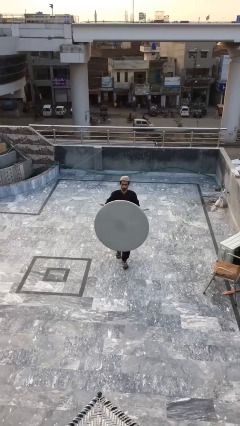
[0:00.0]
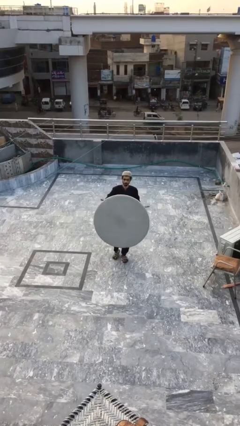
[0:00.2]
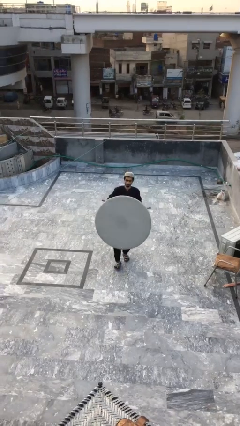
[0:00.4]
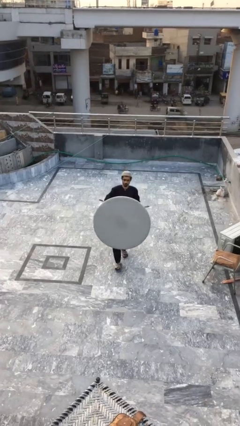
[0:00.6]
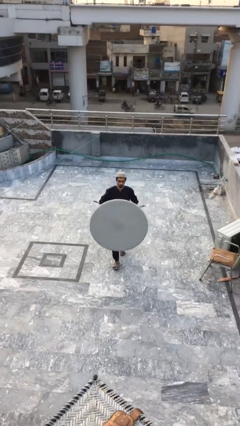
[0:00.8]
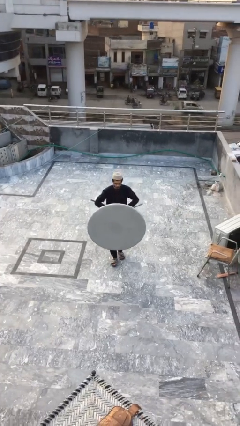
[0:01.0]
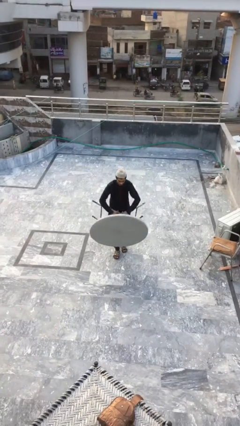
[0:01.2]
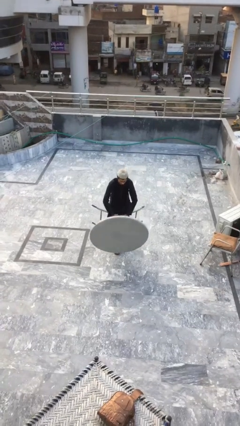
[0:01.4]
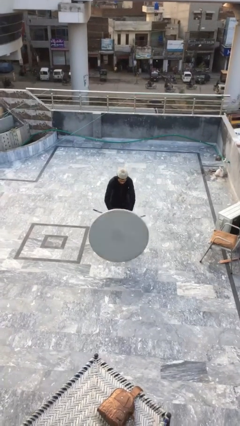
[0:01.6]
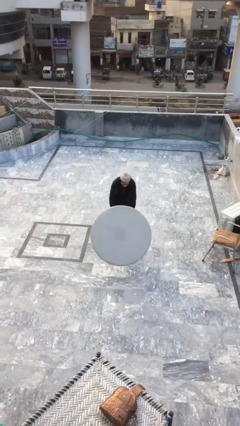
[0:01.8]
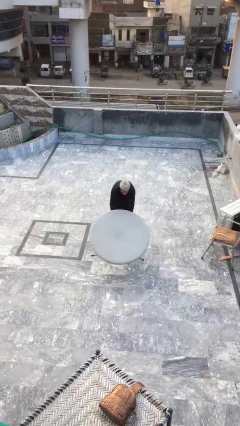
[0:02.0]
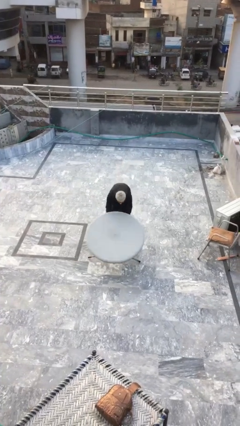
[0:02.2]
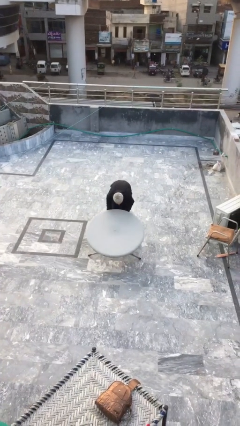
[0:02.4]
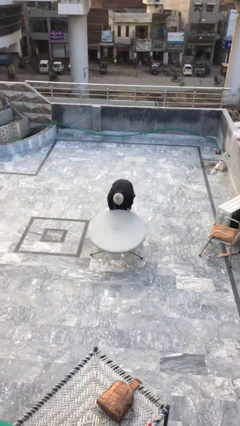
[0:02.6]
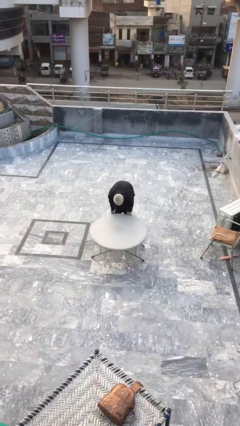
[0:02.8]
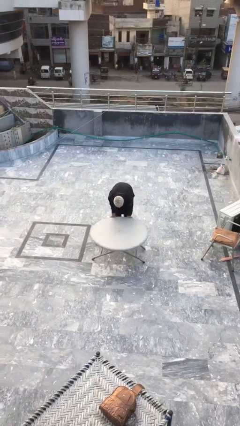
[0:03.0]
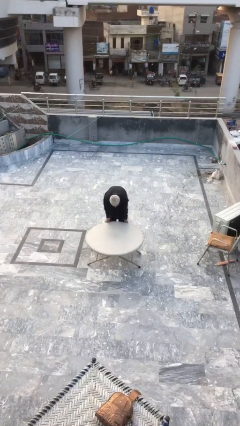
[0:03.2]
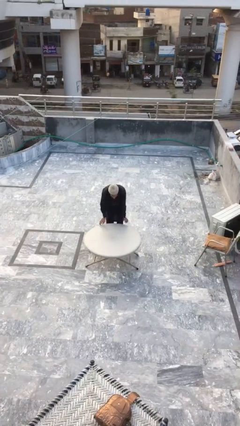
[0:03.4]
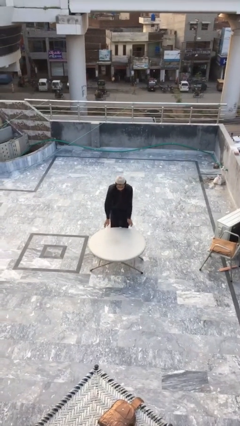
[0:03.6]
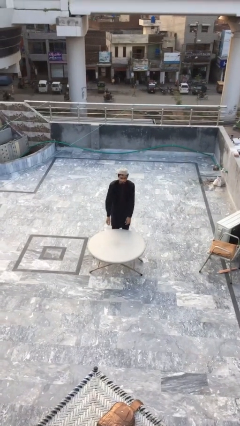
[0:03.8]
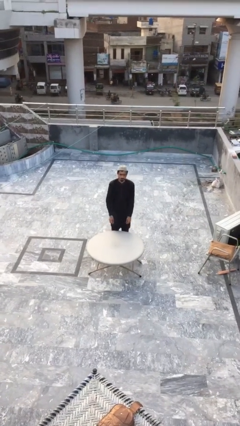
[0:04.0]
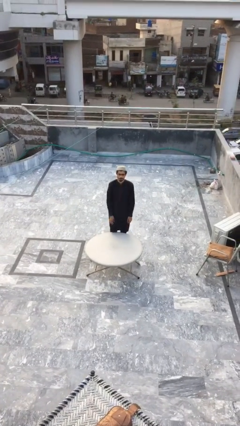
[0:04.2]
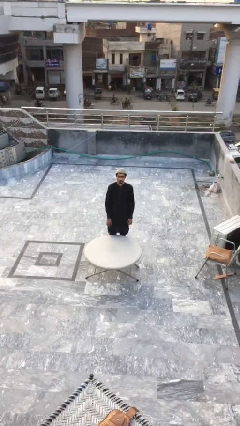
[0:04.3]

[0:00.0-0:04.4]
person puts down object on floor

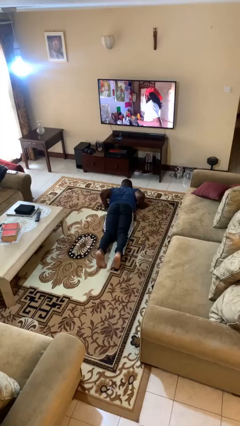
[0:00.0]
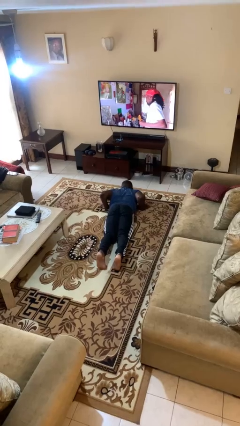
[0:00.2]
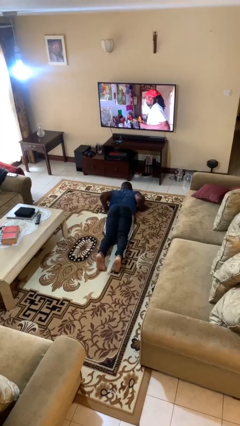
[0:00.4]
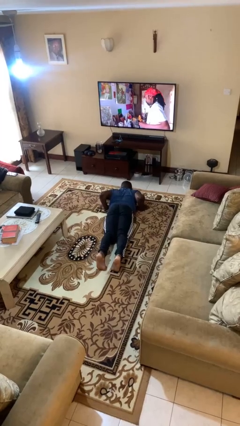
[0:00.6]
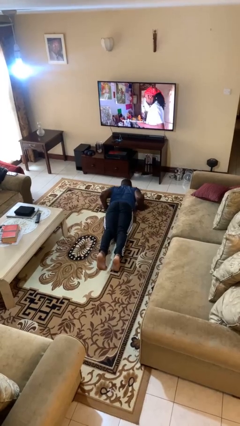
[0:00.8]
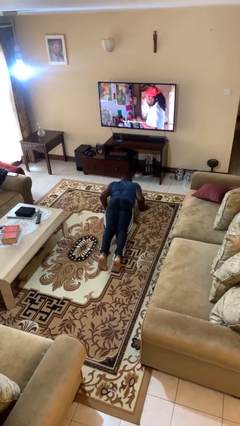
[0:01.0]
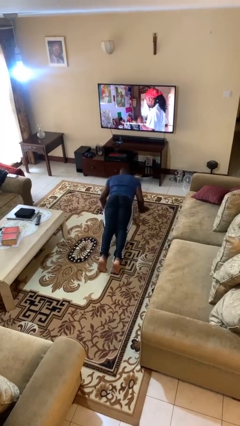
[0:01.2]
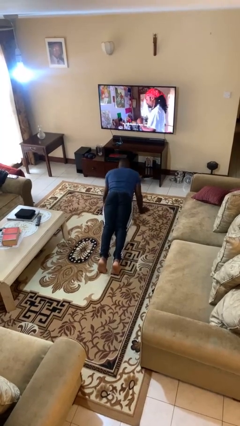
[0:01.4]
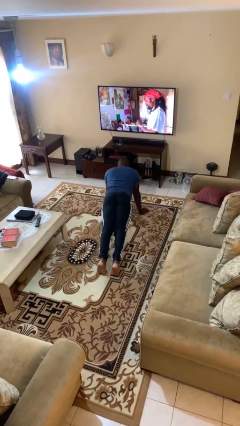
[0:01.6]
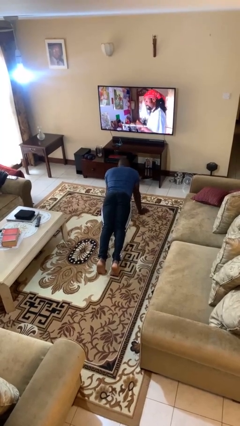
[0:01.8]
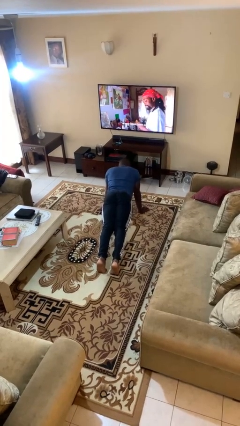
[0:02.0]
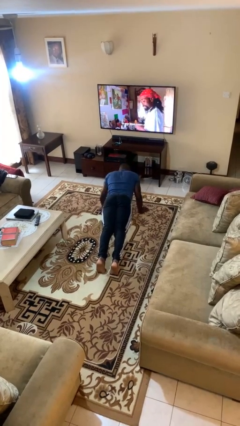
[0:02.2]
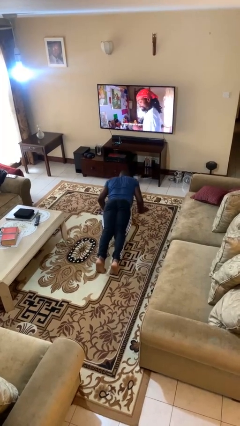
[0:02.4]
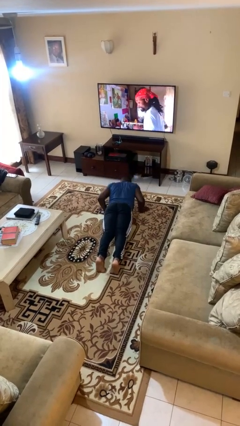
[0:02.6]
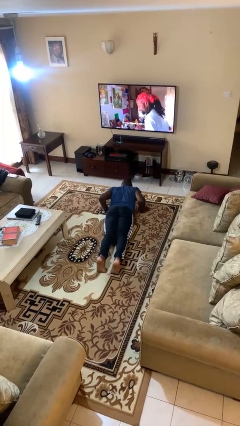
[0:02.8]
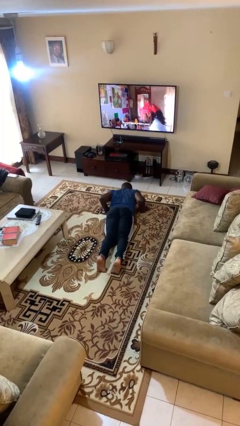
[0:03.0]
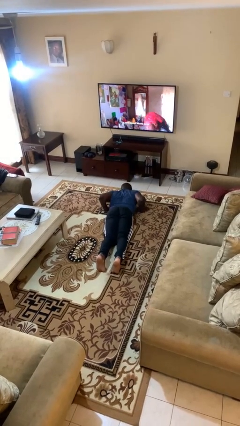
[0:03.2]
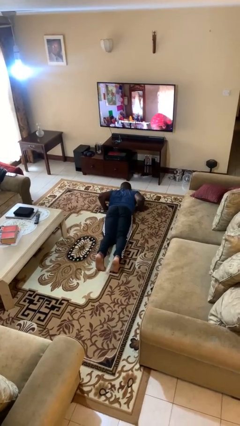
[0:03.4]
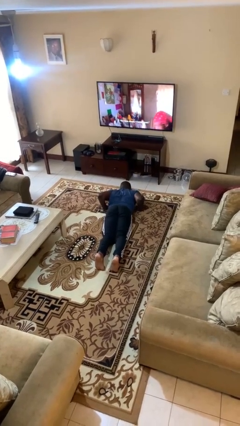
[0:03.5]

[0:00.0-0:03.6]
person exercises with pushup

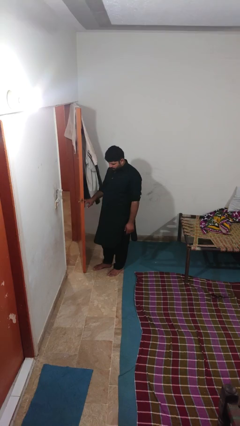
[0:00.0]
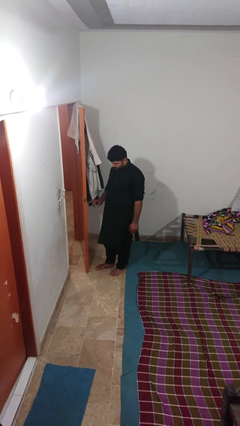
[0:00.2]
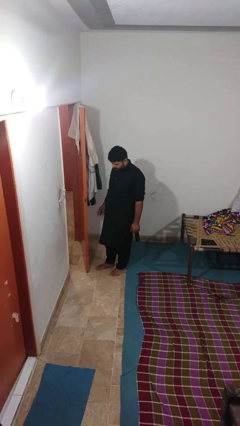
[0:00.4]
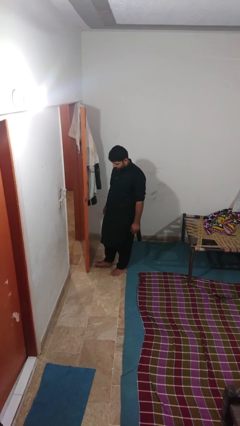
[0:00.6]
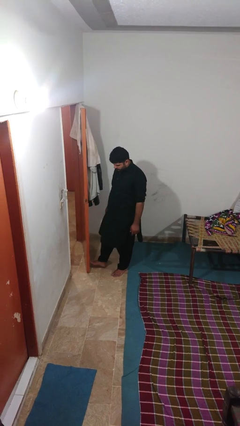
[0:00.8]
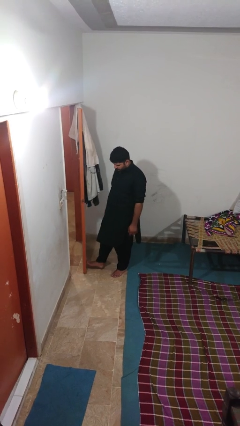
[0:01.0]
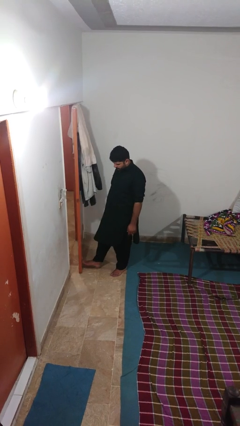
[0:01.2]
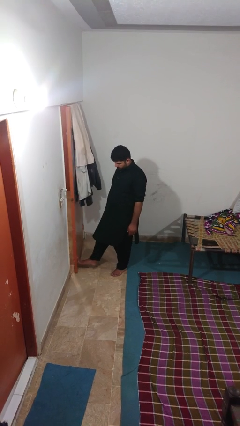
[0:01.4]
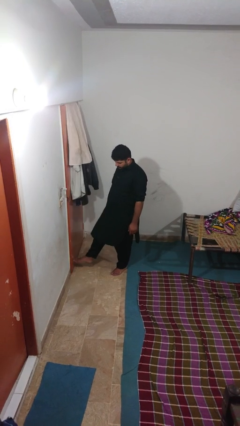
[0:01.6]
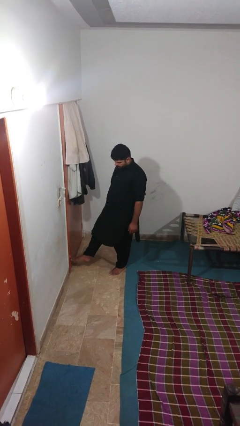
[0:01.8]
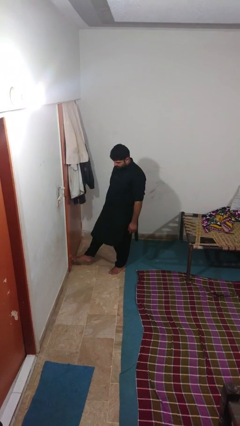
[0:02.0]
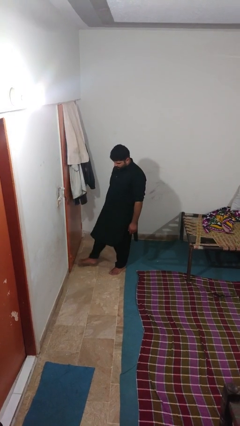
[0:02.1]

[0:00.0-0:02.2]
person closes door with foot

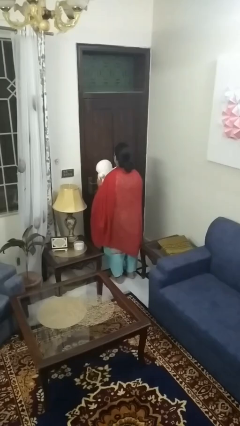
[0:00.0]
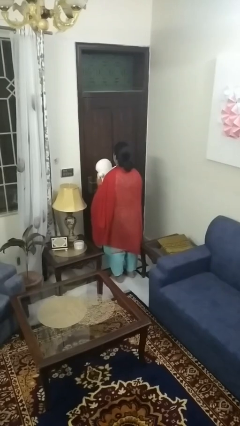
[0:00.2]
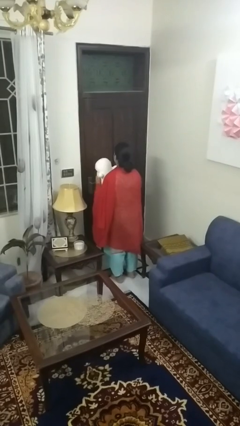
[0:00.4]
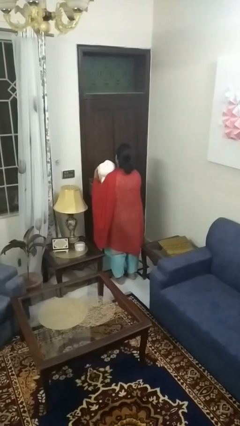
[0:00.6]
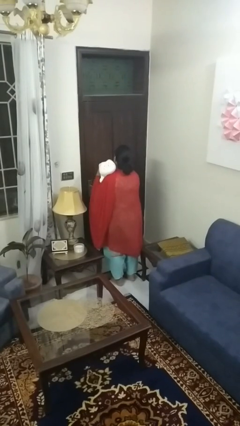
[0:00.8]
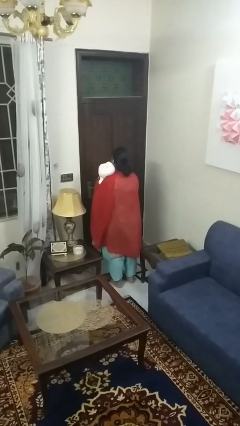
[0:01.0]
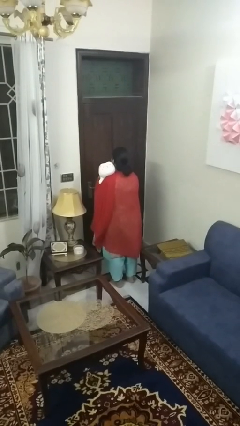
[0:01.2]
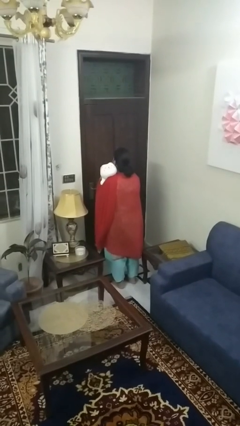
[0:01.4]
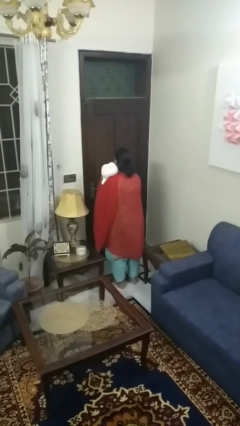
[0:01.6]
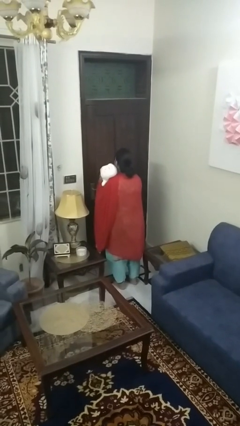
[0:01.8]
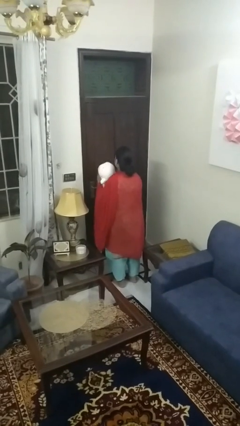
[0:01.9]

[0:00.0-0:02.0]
person hugs stuffed animal

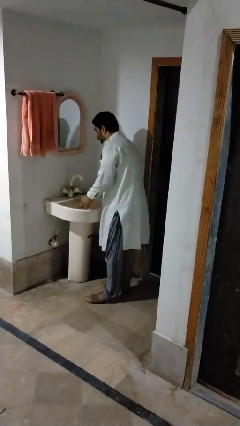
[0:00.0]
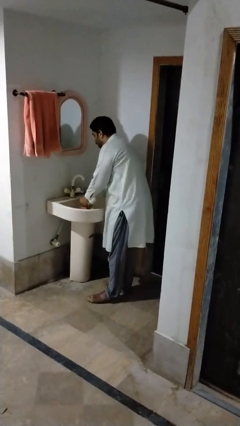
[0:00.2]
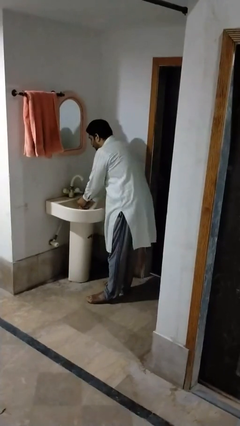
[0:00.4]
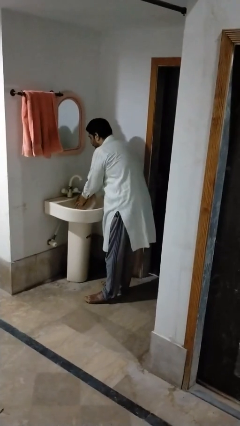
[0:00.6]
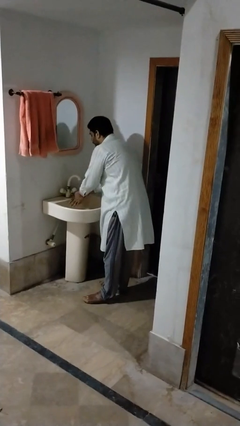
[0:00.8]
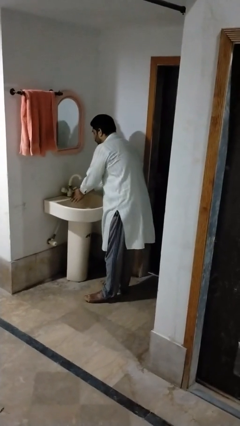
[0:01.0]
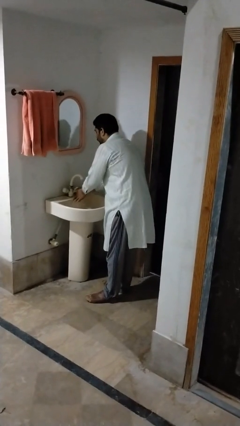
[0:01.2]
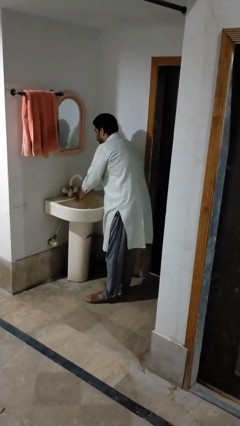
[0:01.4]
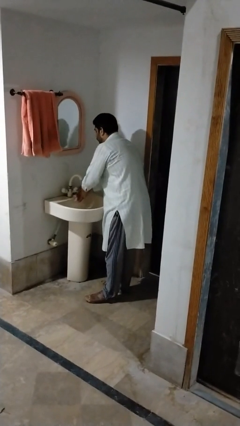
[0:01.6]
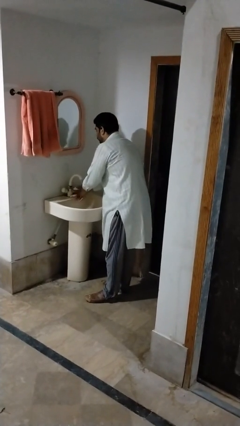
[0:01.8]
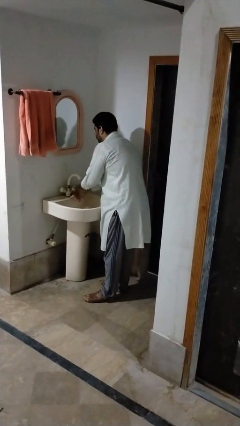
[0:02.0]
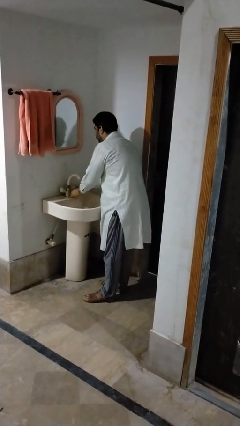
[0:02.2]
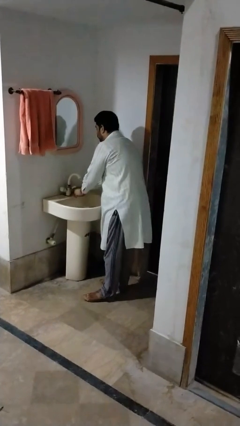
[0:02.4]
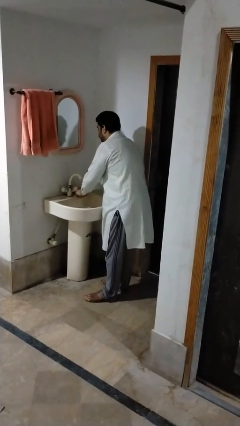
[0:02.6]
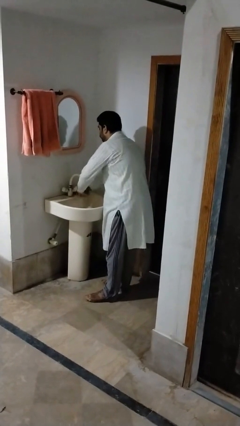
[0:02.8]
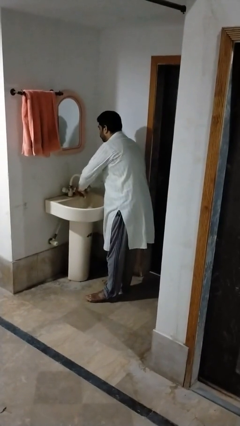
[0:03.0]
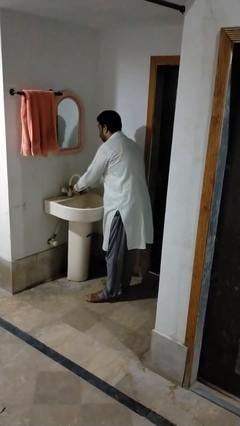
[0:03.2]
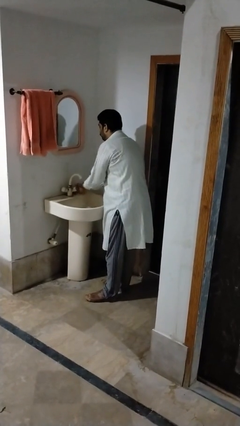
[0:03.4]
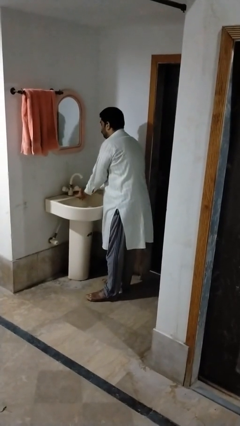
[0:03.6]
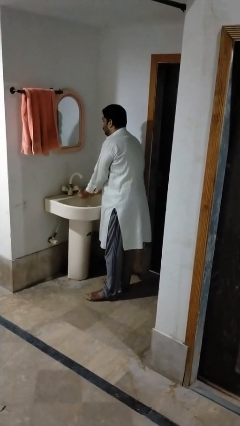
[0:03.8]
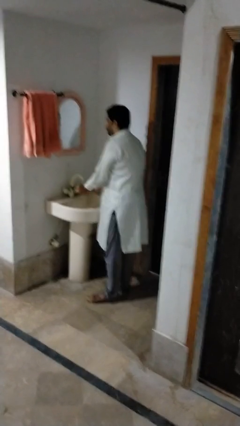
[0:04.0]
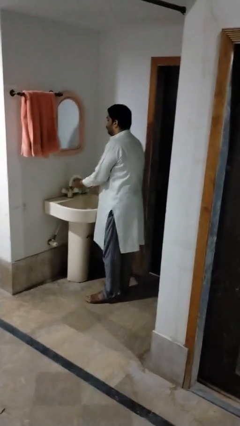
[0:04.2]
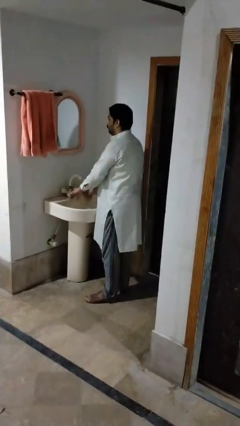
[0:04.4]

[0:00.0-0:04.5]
person washes hands

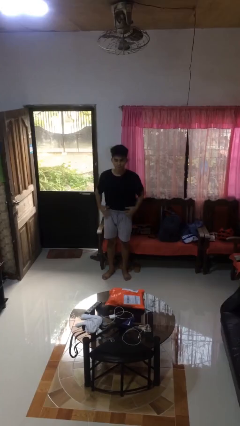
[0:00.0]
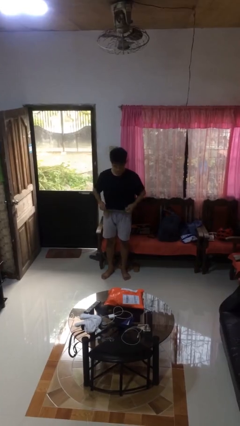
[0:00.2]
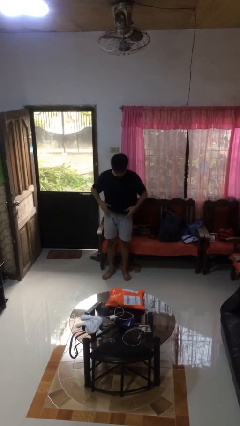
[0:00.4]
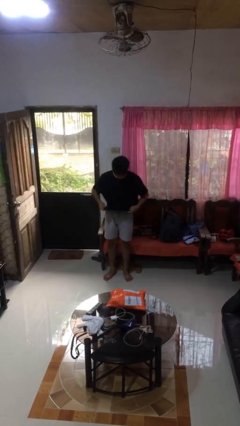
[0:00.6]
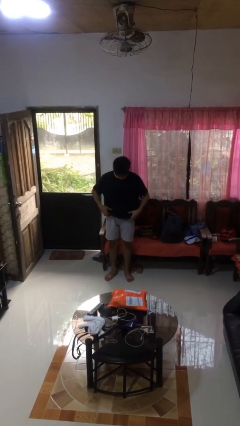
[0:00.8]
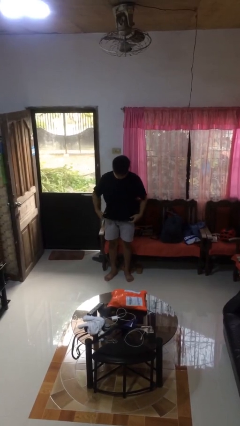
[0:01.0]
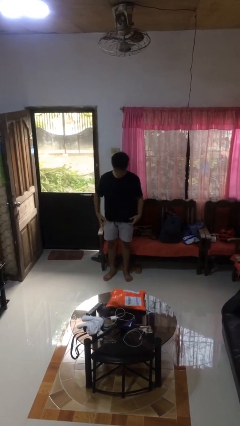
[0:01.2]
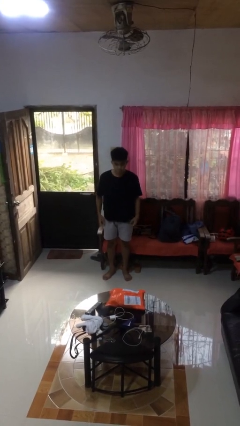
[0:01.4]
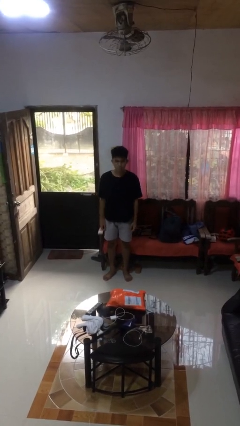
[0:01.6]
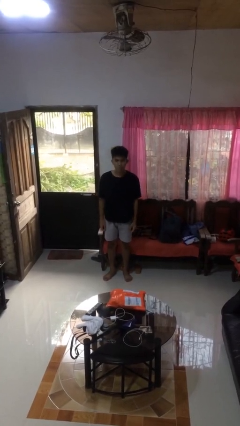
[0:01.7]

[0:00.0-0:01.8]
person untucks shirt
